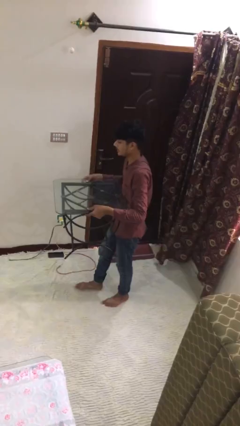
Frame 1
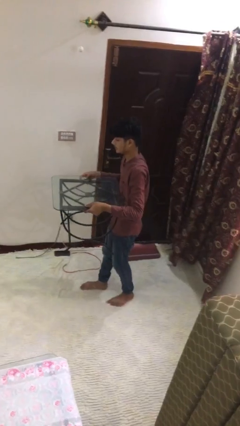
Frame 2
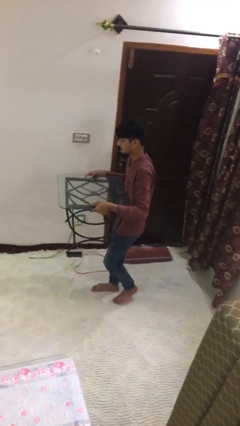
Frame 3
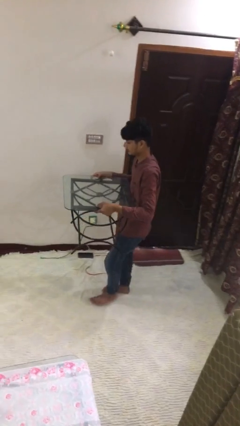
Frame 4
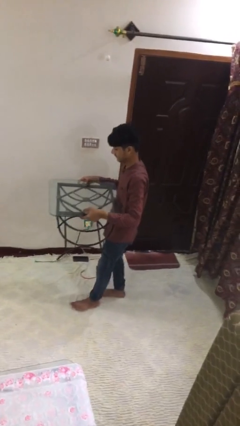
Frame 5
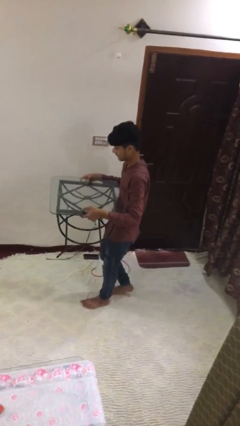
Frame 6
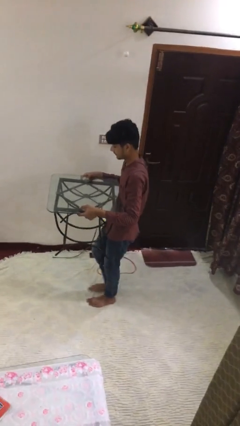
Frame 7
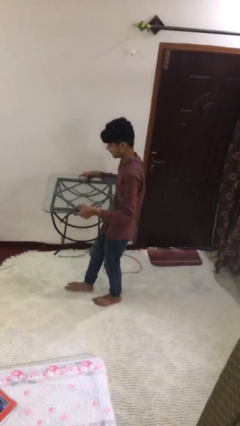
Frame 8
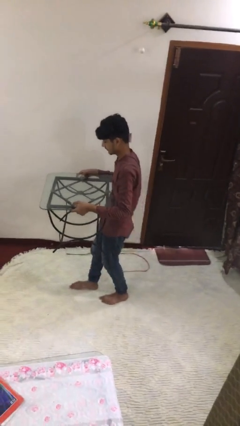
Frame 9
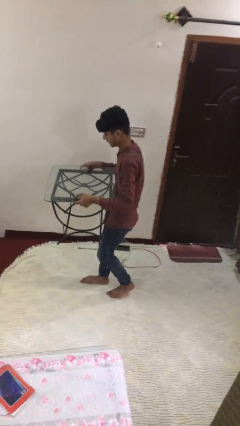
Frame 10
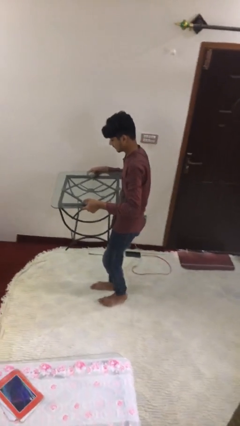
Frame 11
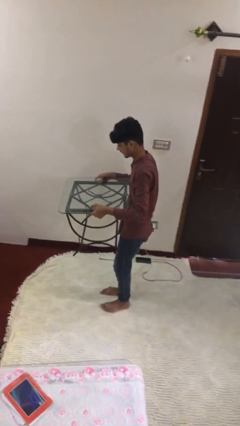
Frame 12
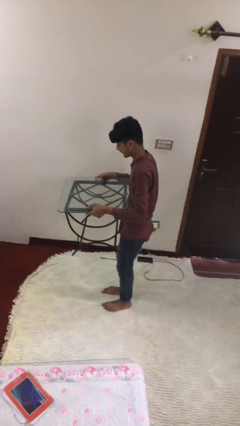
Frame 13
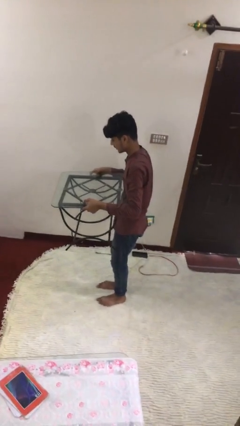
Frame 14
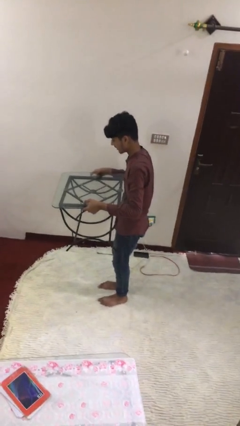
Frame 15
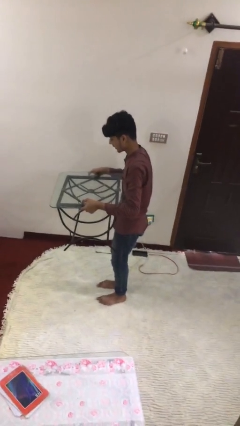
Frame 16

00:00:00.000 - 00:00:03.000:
person carries heavy object

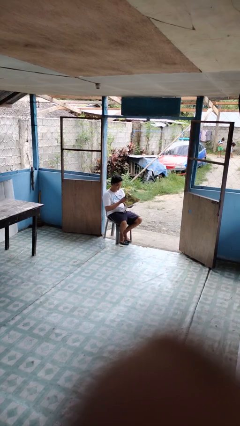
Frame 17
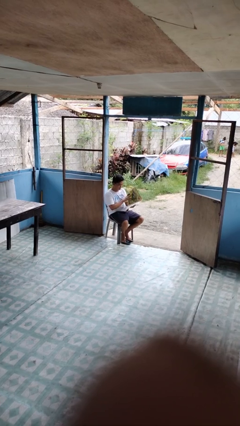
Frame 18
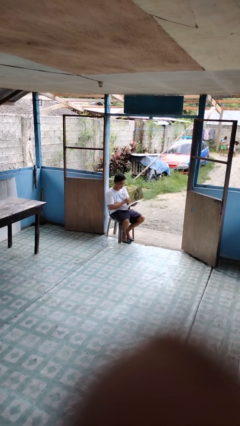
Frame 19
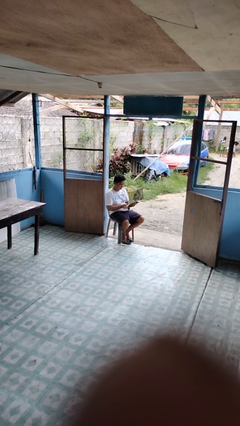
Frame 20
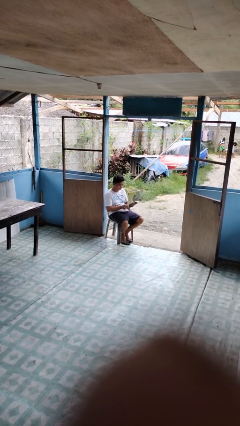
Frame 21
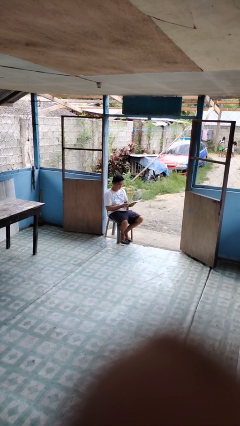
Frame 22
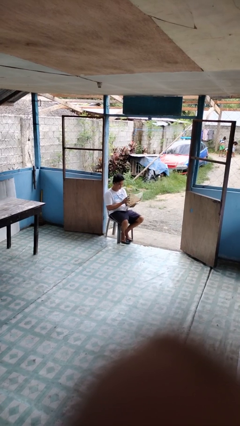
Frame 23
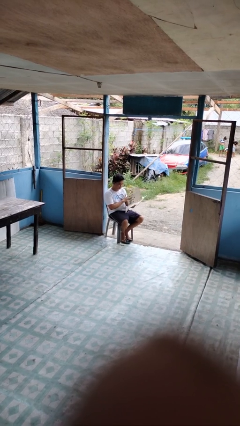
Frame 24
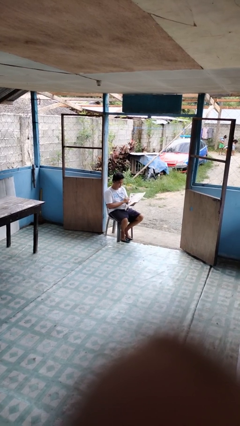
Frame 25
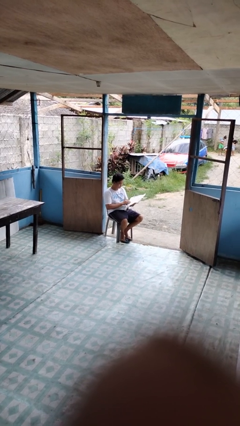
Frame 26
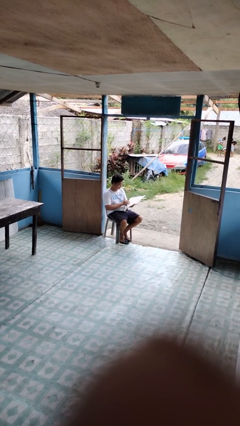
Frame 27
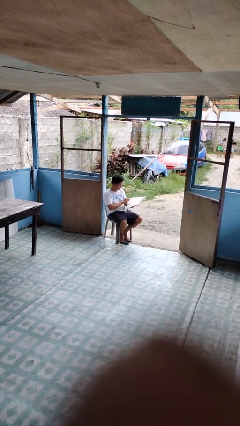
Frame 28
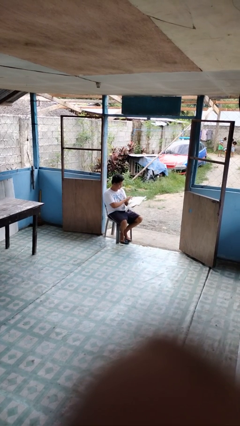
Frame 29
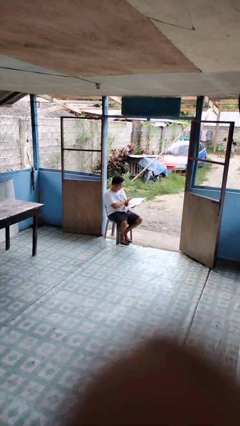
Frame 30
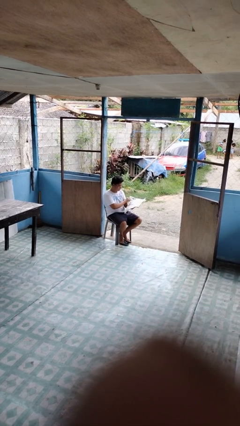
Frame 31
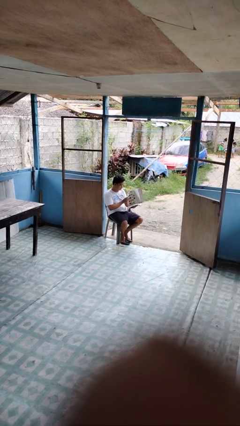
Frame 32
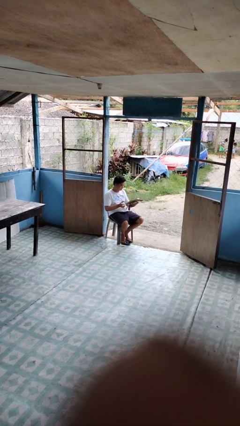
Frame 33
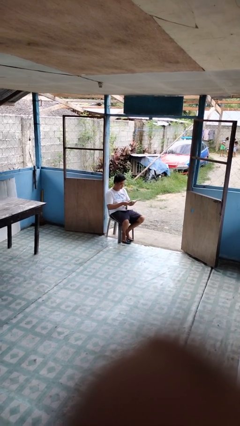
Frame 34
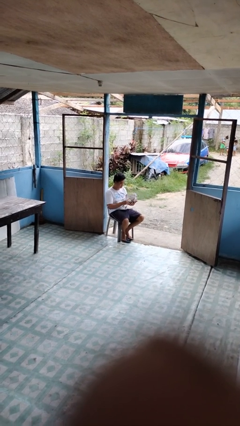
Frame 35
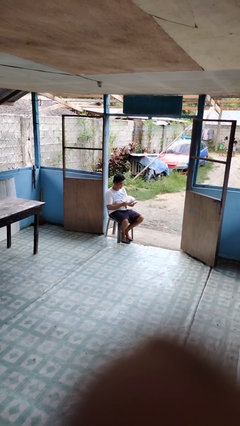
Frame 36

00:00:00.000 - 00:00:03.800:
person reads newspaper

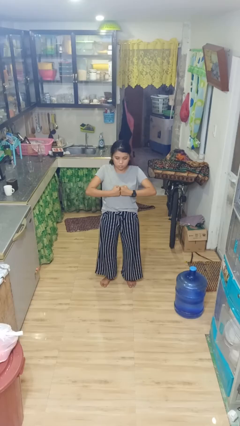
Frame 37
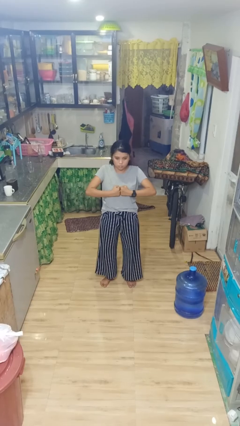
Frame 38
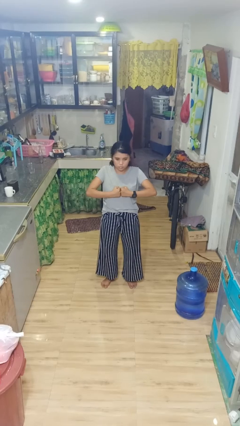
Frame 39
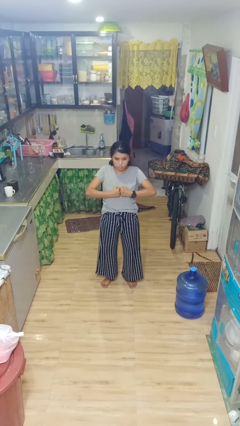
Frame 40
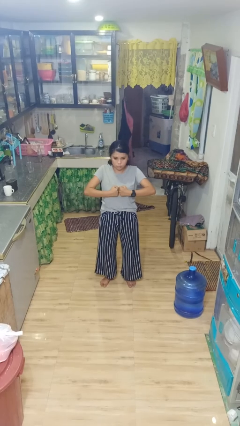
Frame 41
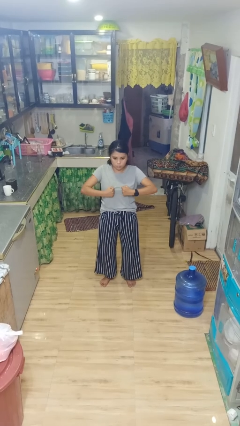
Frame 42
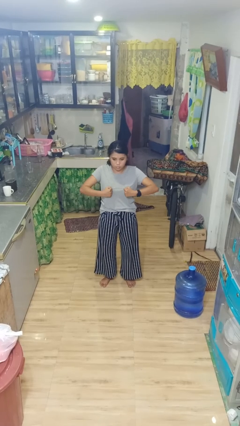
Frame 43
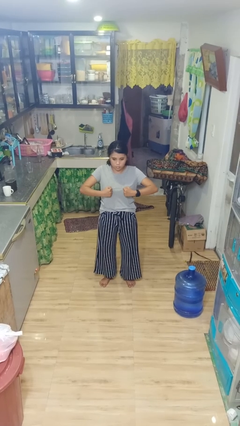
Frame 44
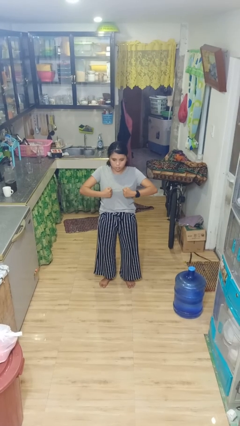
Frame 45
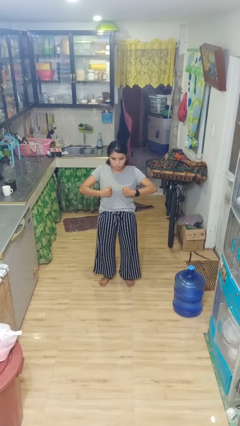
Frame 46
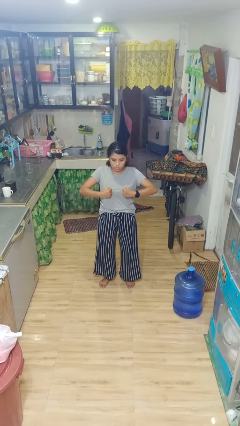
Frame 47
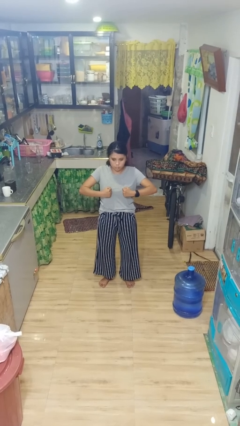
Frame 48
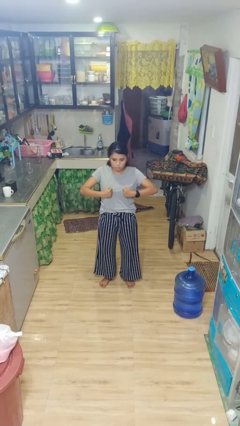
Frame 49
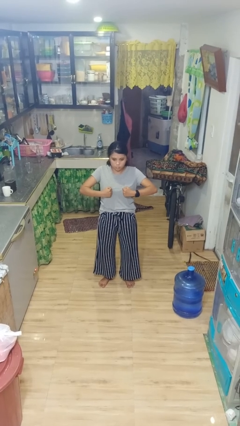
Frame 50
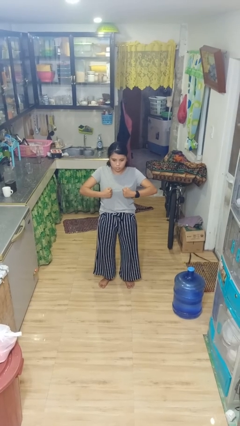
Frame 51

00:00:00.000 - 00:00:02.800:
person gestures zoom in

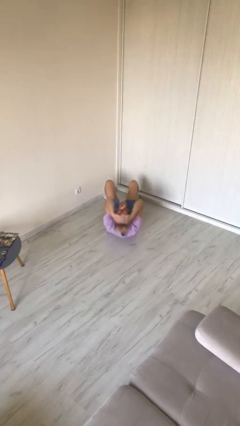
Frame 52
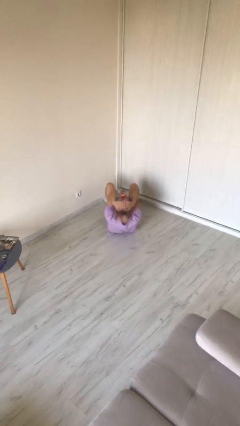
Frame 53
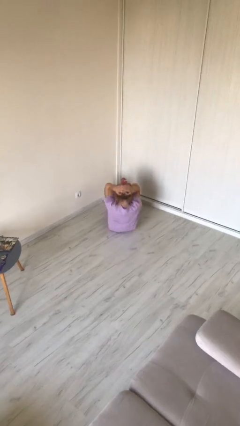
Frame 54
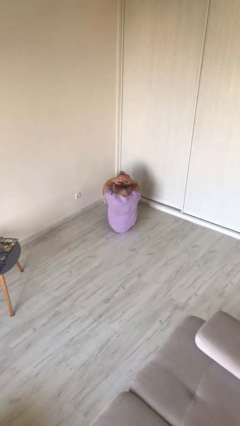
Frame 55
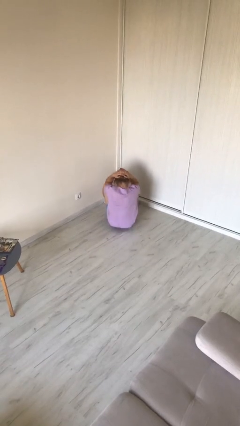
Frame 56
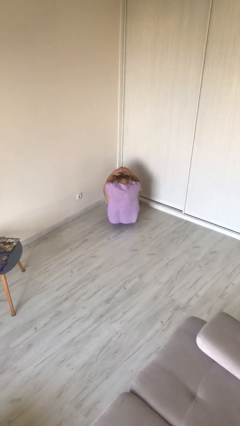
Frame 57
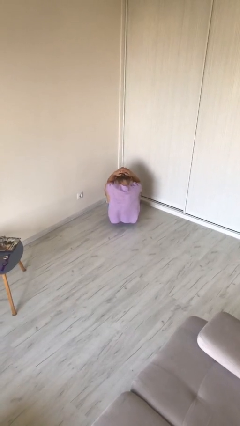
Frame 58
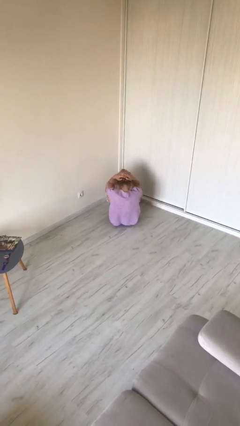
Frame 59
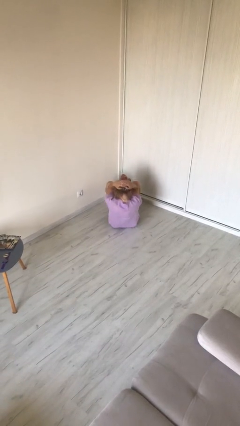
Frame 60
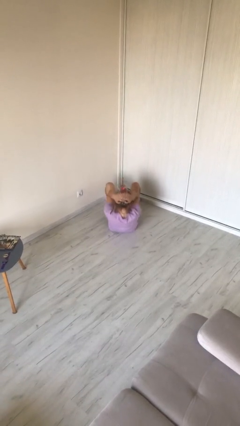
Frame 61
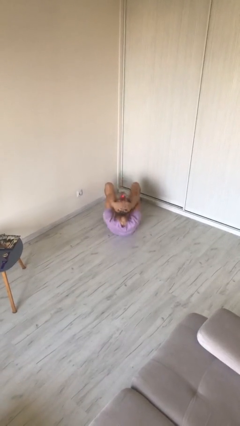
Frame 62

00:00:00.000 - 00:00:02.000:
person exercises with situp

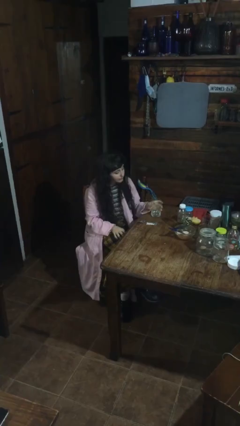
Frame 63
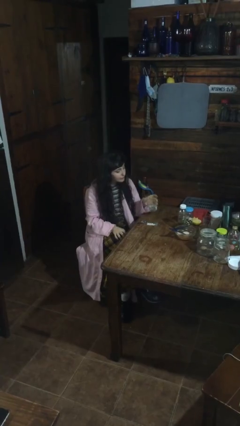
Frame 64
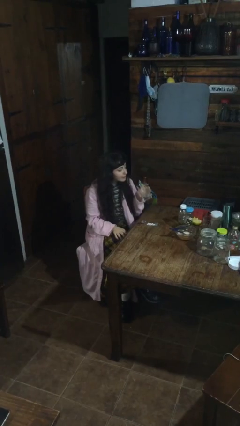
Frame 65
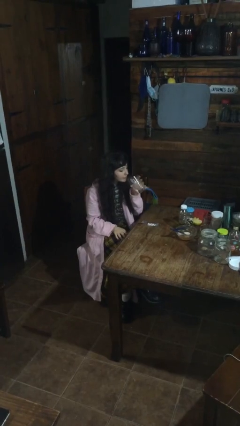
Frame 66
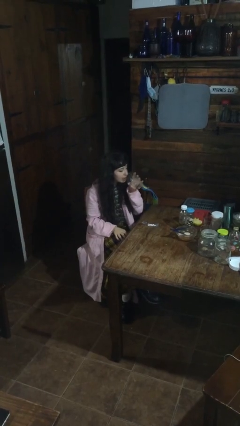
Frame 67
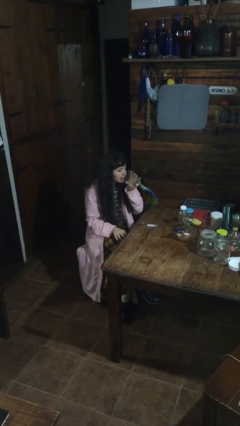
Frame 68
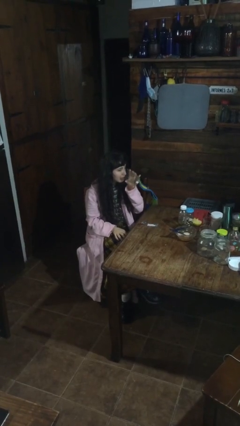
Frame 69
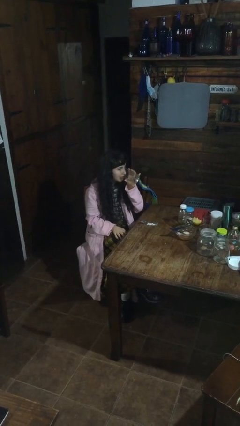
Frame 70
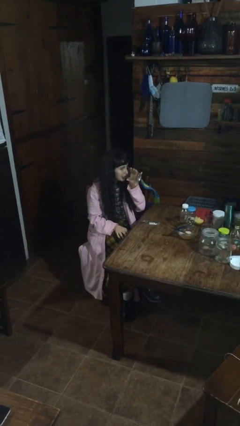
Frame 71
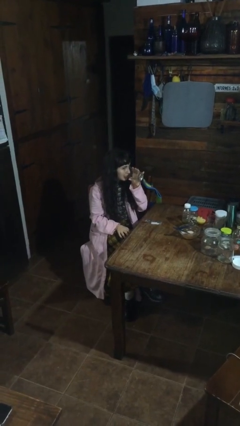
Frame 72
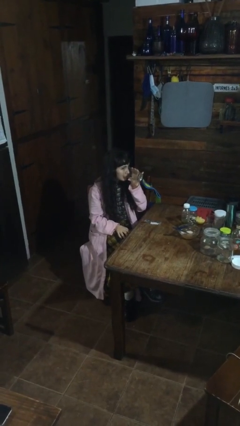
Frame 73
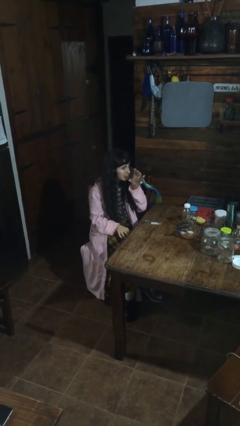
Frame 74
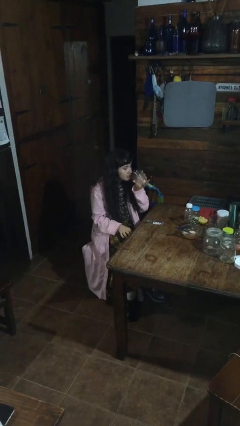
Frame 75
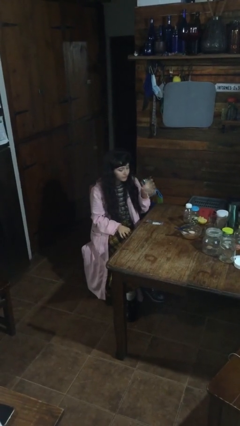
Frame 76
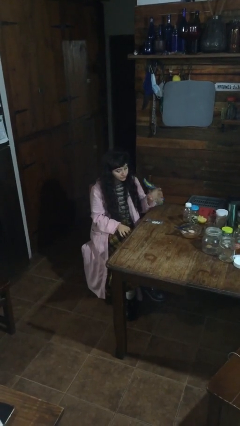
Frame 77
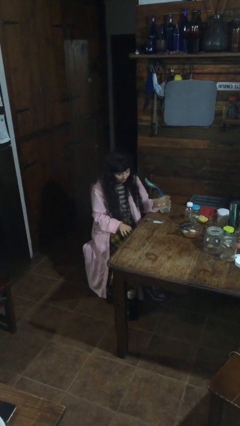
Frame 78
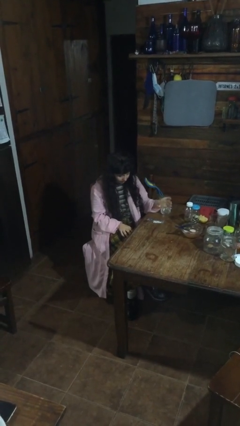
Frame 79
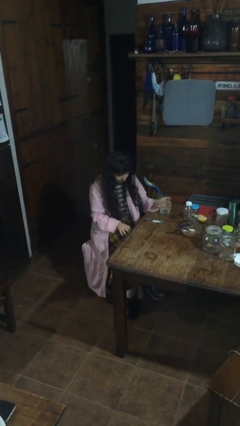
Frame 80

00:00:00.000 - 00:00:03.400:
person drinks from cup

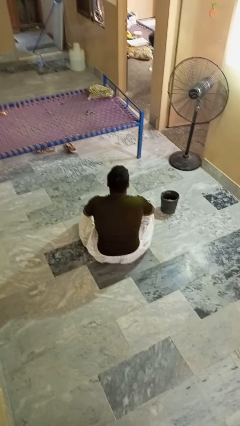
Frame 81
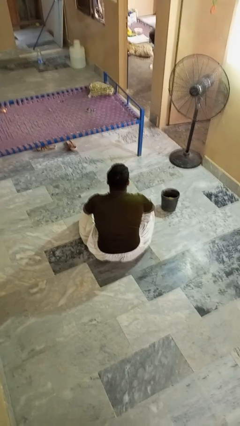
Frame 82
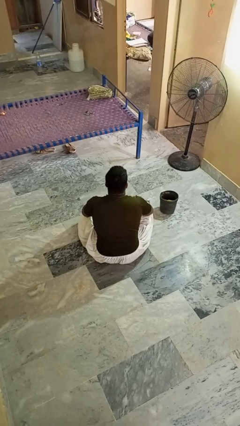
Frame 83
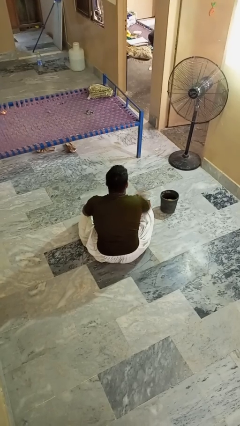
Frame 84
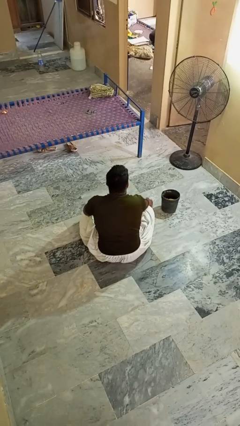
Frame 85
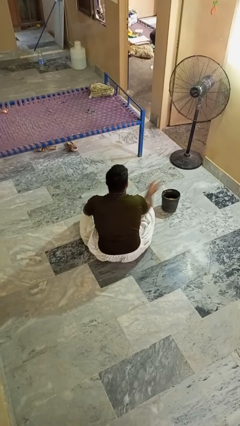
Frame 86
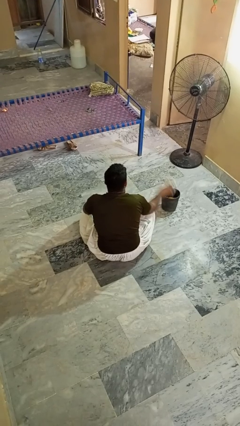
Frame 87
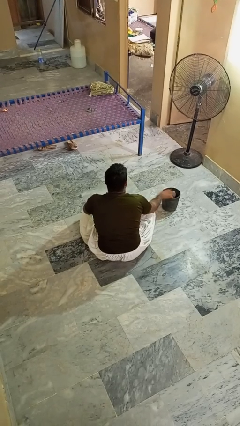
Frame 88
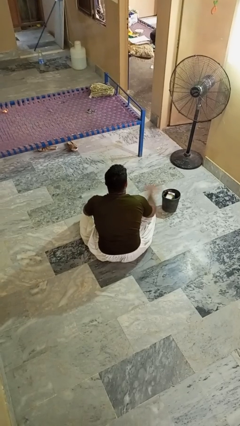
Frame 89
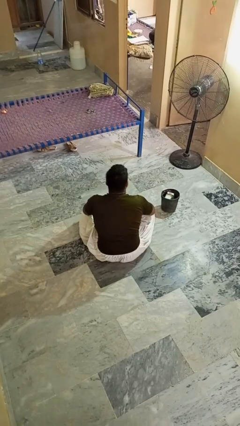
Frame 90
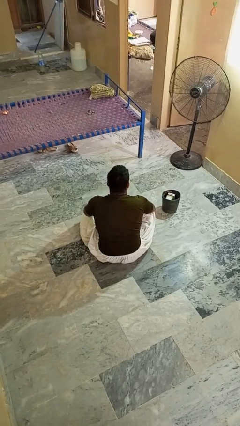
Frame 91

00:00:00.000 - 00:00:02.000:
person puts object into basket

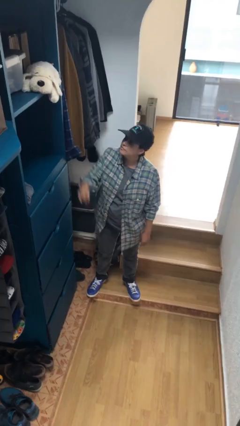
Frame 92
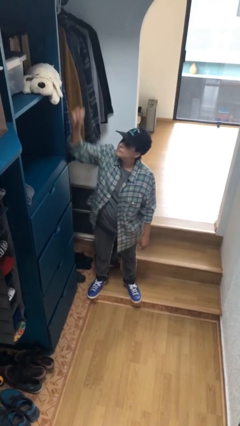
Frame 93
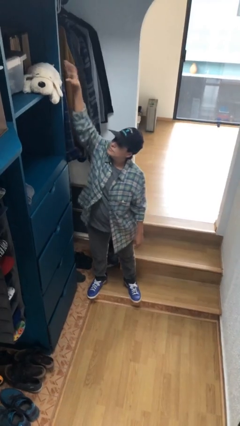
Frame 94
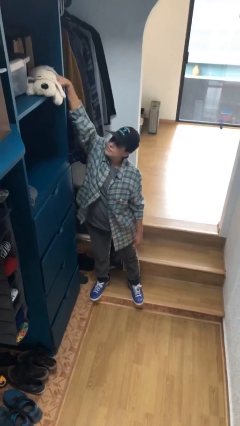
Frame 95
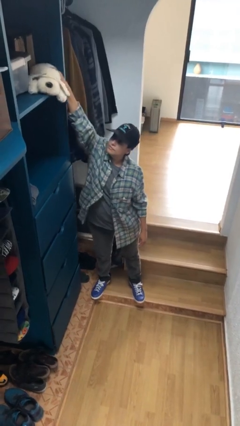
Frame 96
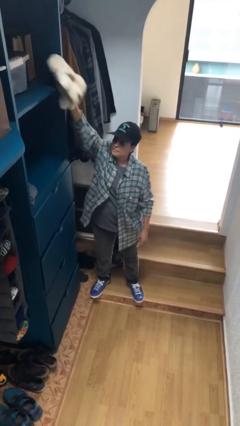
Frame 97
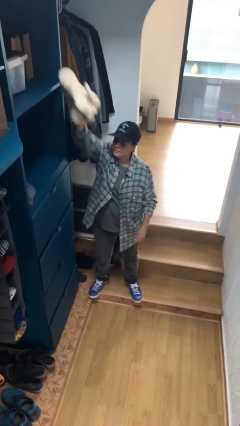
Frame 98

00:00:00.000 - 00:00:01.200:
person picks up object from shelf
